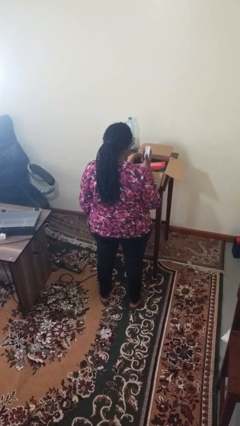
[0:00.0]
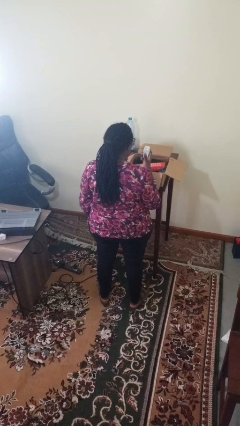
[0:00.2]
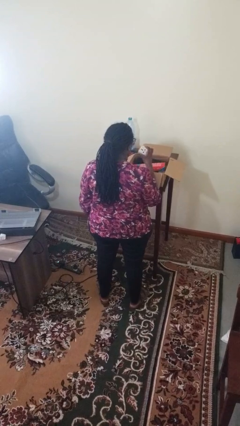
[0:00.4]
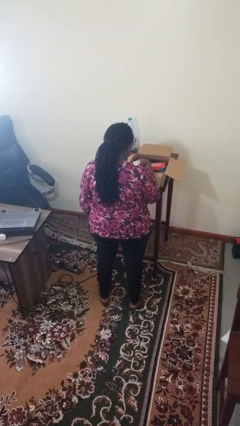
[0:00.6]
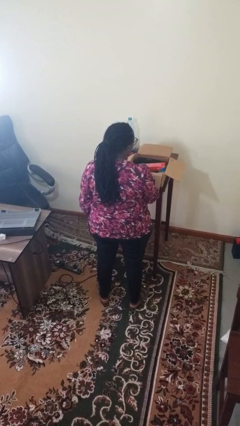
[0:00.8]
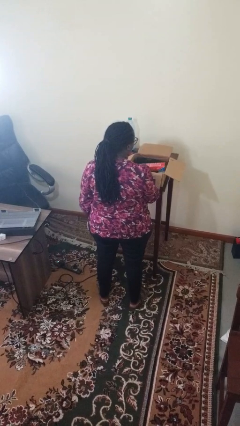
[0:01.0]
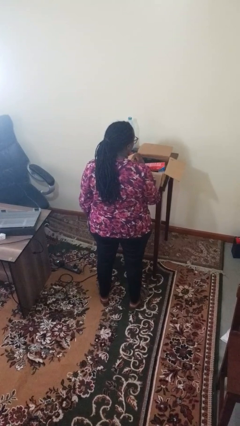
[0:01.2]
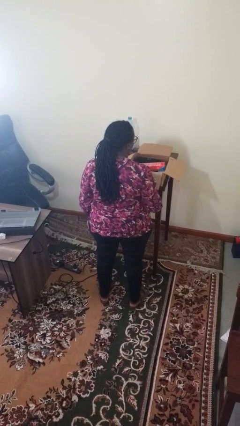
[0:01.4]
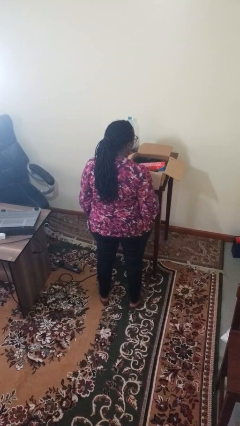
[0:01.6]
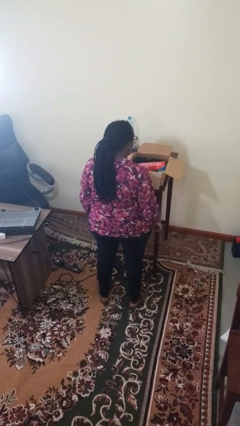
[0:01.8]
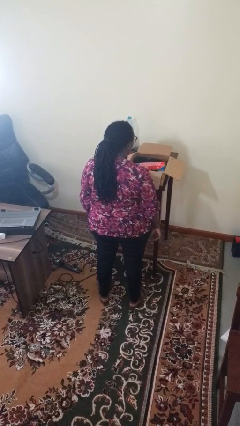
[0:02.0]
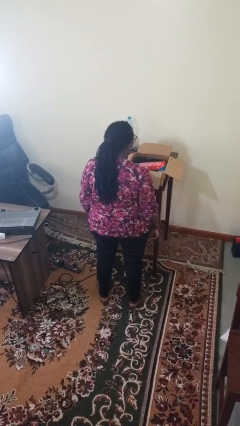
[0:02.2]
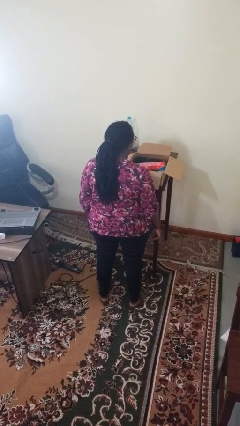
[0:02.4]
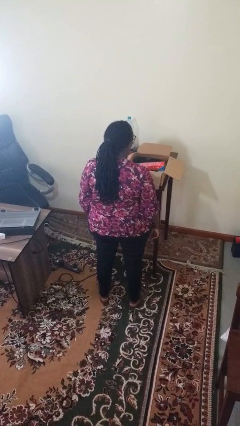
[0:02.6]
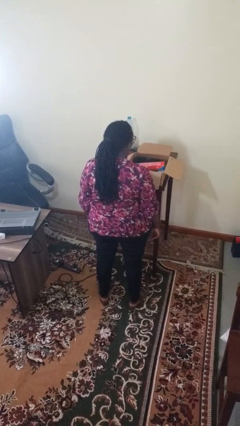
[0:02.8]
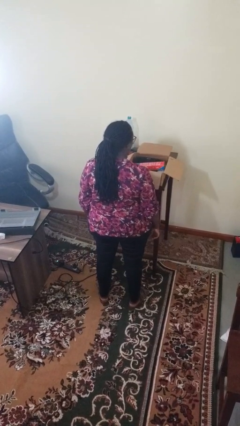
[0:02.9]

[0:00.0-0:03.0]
person puts object into box

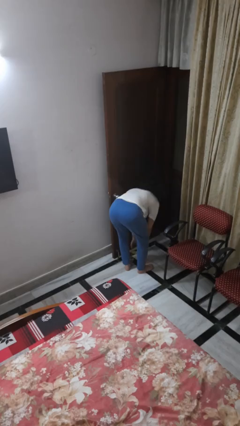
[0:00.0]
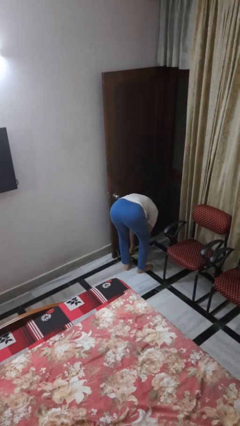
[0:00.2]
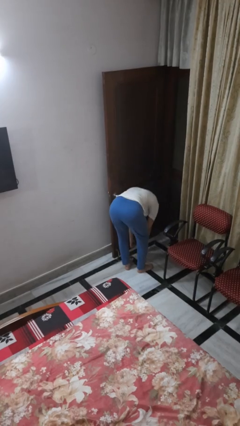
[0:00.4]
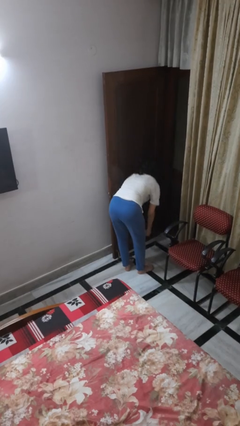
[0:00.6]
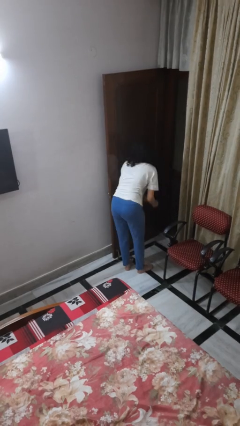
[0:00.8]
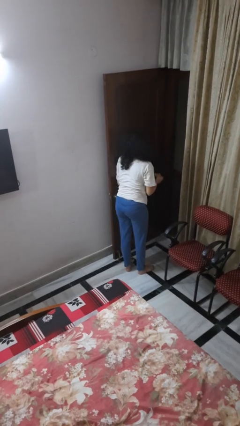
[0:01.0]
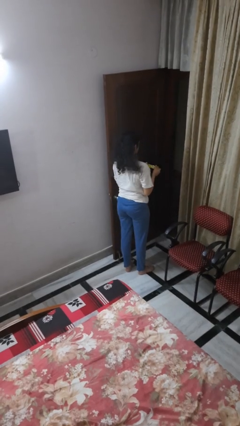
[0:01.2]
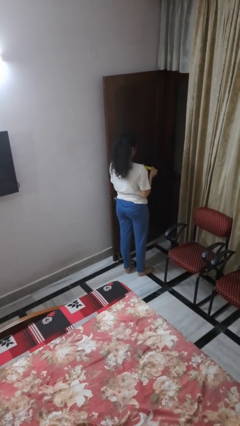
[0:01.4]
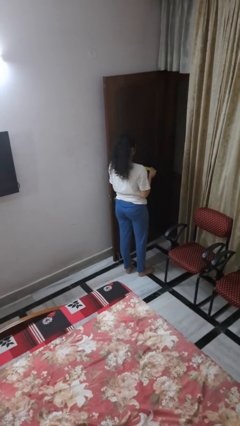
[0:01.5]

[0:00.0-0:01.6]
person picks up object from floor

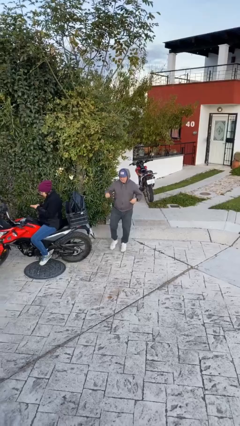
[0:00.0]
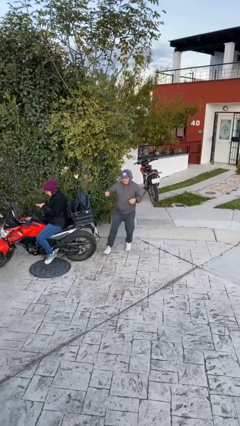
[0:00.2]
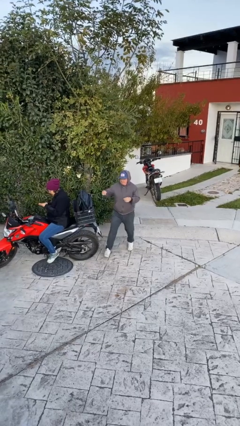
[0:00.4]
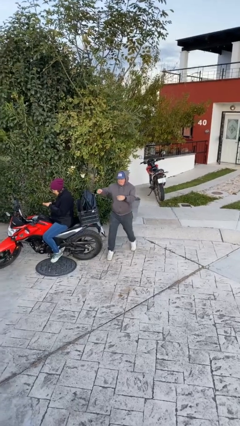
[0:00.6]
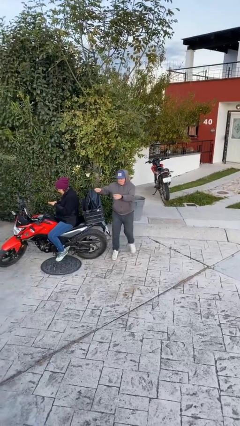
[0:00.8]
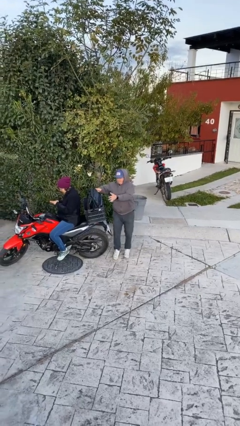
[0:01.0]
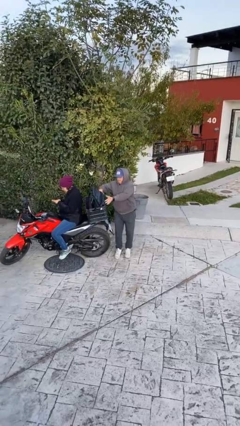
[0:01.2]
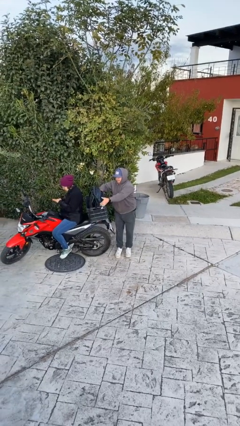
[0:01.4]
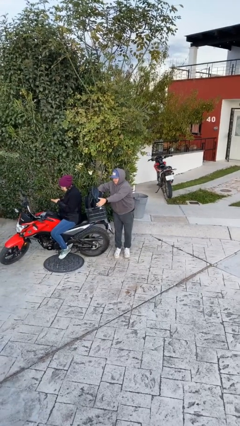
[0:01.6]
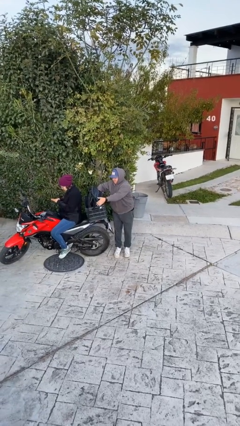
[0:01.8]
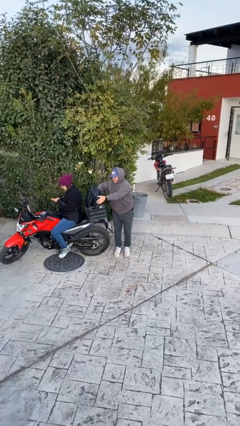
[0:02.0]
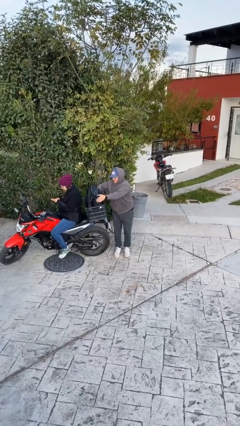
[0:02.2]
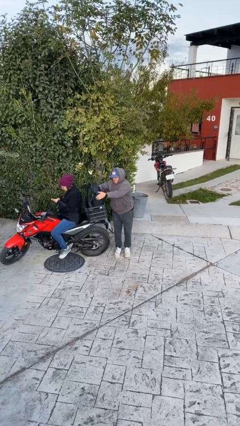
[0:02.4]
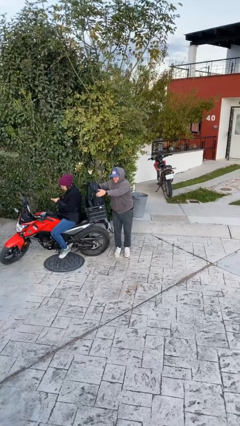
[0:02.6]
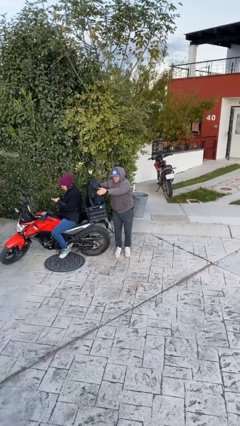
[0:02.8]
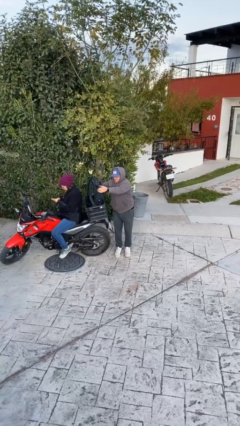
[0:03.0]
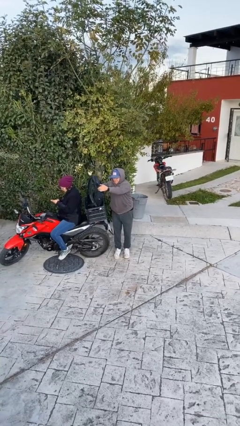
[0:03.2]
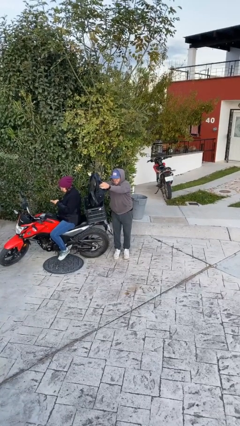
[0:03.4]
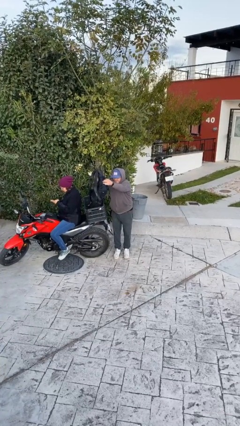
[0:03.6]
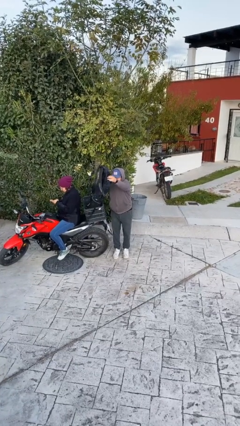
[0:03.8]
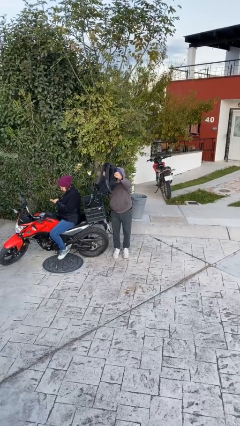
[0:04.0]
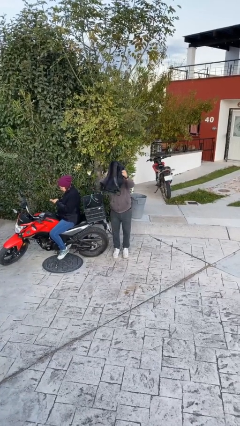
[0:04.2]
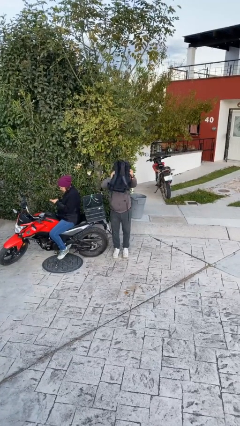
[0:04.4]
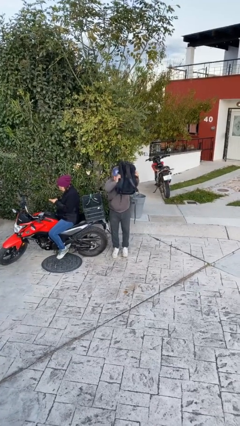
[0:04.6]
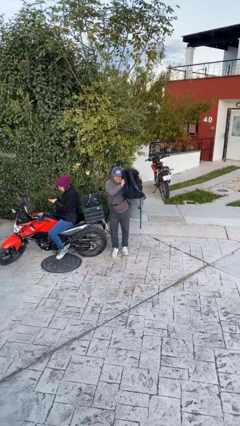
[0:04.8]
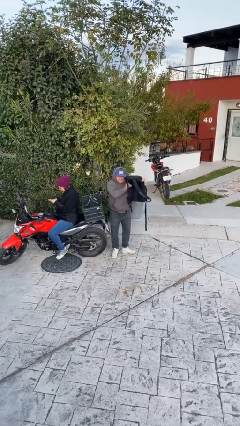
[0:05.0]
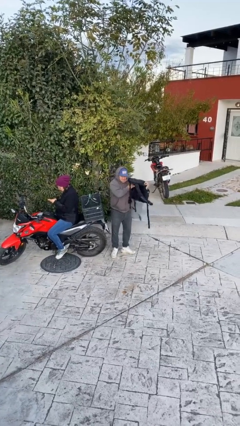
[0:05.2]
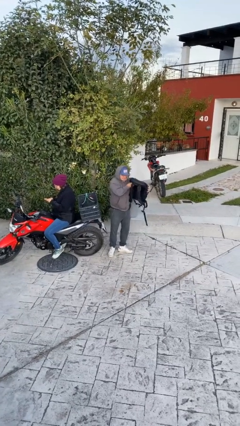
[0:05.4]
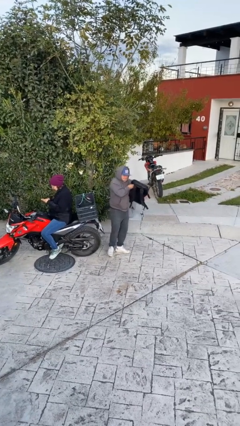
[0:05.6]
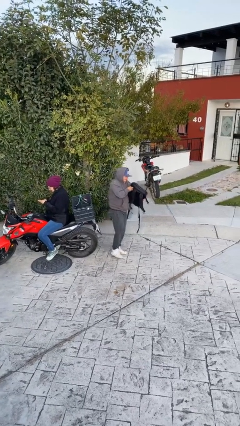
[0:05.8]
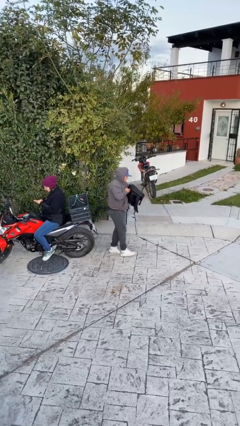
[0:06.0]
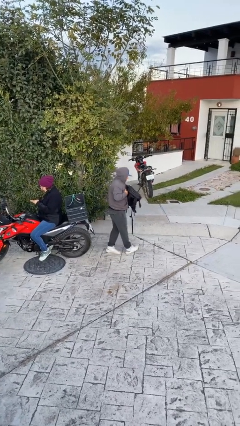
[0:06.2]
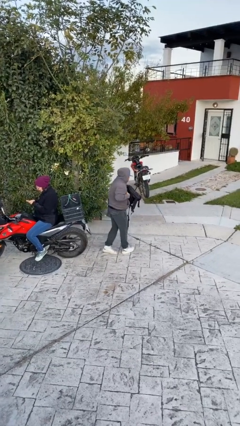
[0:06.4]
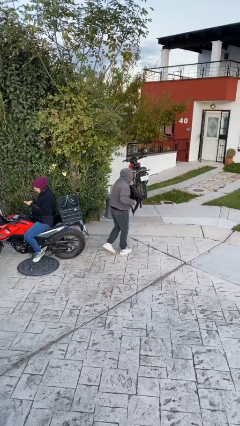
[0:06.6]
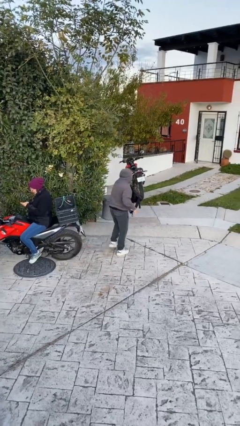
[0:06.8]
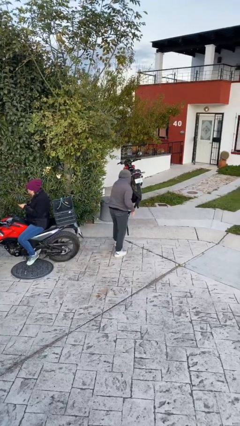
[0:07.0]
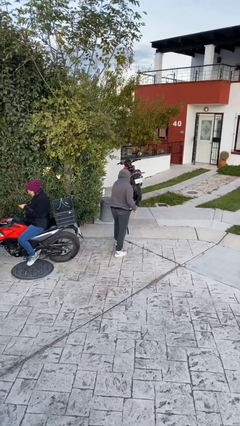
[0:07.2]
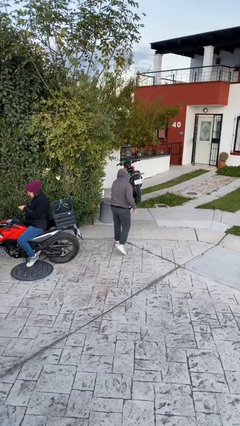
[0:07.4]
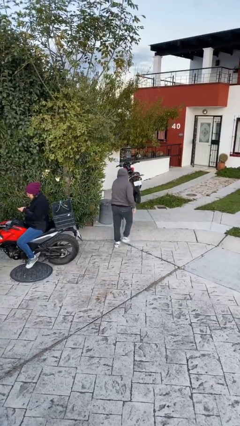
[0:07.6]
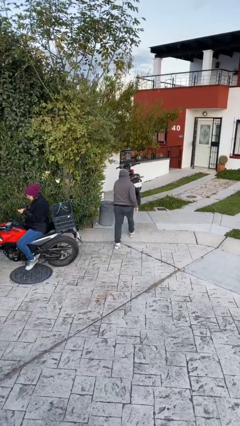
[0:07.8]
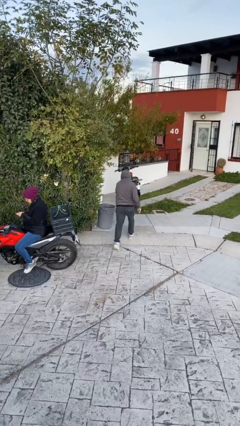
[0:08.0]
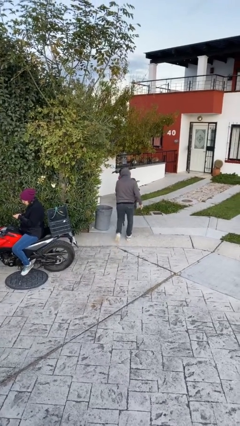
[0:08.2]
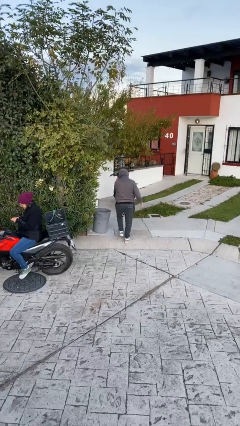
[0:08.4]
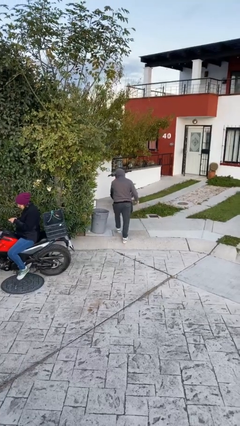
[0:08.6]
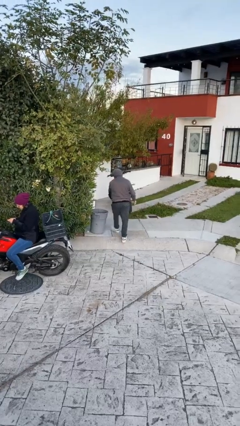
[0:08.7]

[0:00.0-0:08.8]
person steals object from person

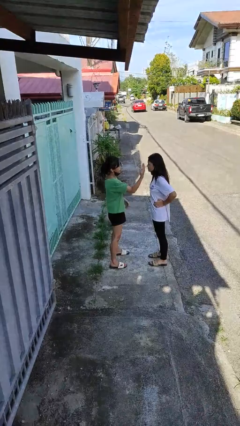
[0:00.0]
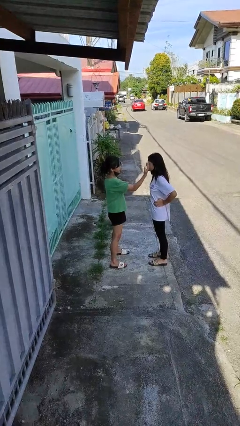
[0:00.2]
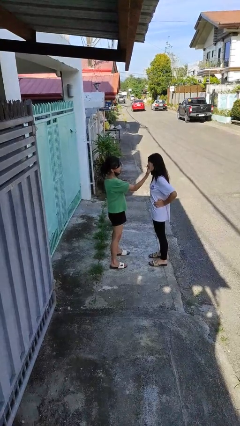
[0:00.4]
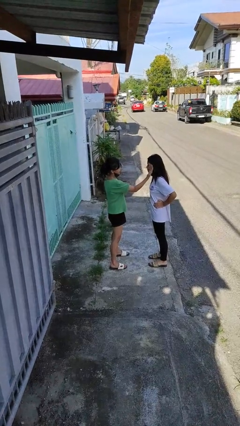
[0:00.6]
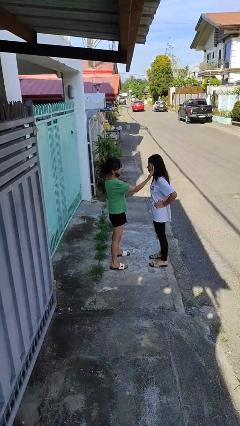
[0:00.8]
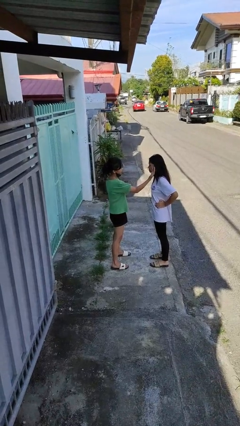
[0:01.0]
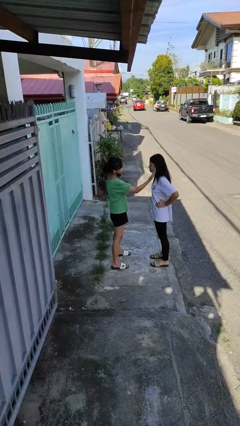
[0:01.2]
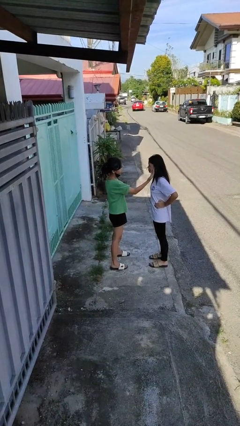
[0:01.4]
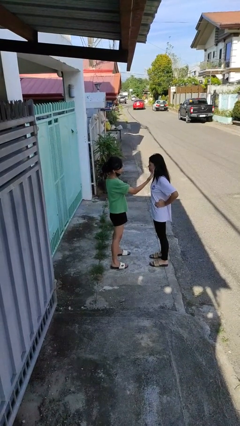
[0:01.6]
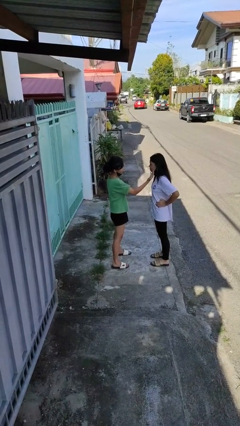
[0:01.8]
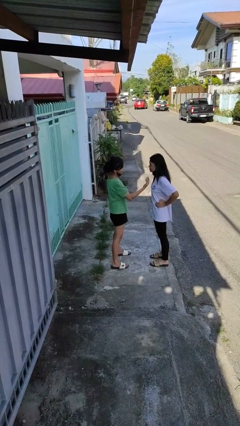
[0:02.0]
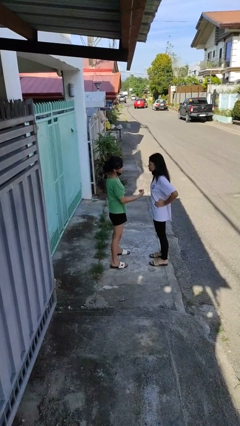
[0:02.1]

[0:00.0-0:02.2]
person touches face of person

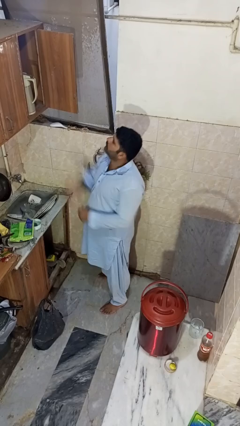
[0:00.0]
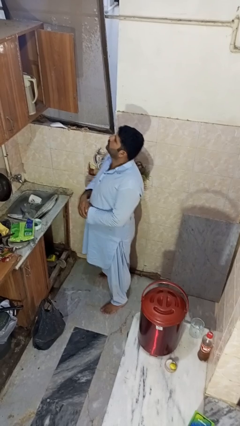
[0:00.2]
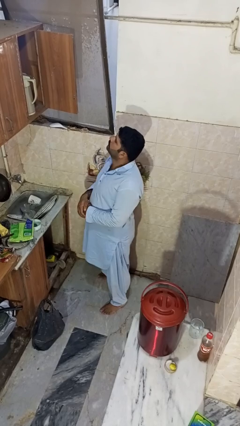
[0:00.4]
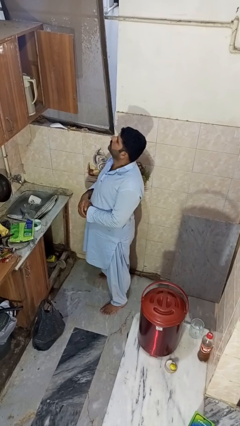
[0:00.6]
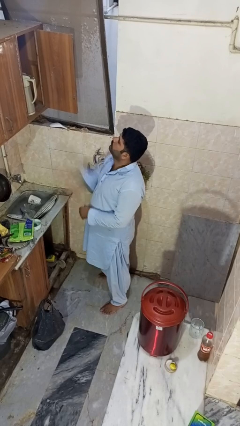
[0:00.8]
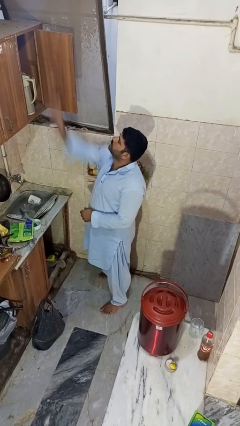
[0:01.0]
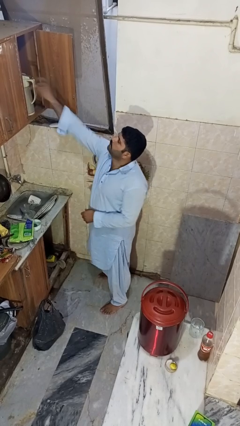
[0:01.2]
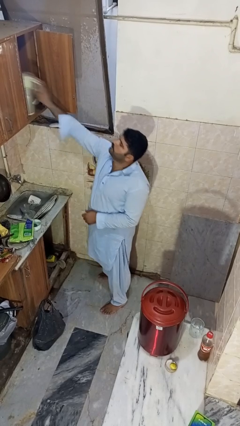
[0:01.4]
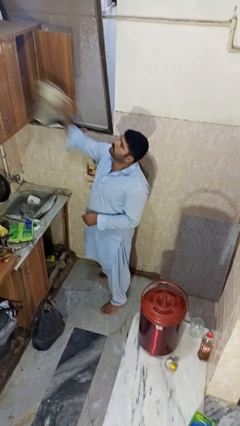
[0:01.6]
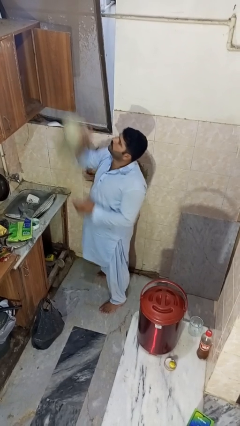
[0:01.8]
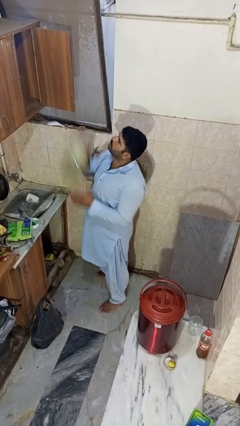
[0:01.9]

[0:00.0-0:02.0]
person takes object from cabinet
